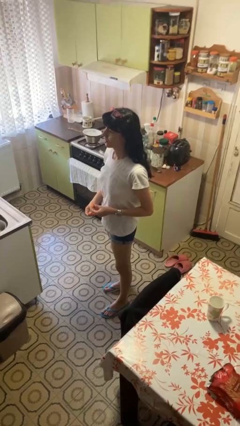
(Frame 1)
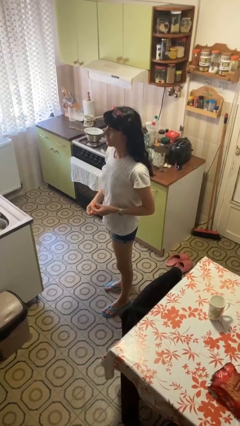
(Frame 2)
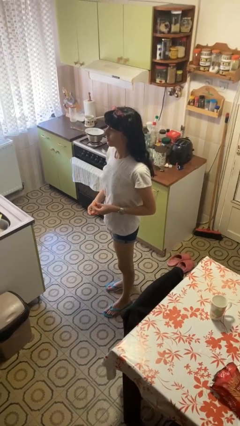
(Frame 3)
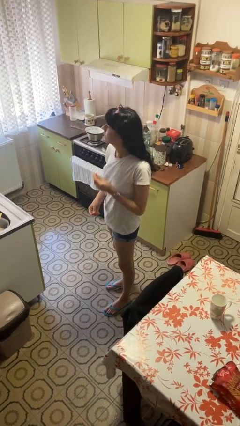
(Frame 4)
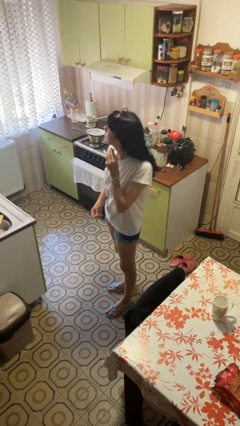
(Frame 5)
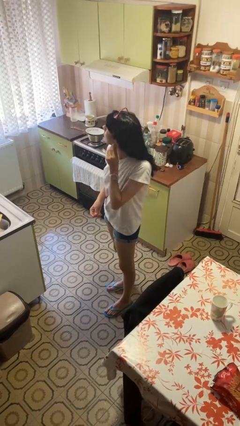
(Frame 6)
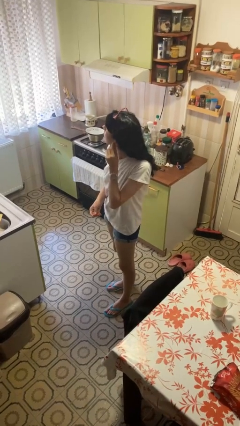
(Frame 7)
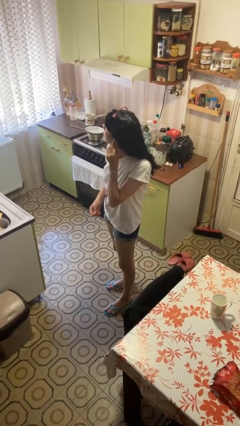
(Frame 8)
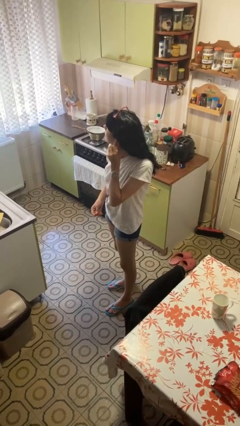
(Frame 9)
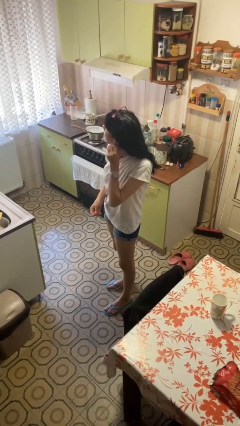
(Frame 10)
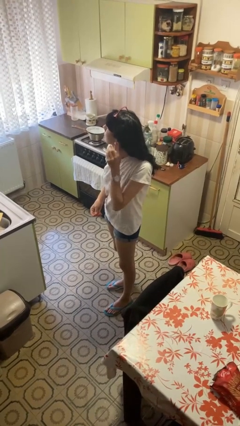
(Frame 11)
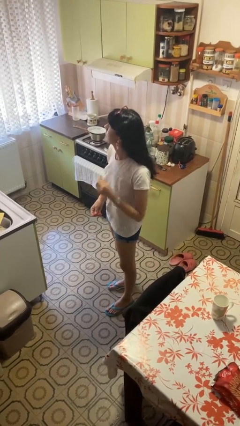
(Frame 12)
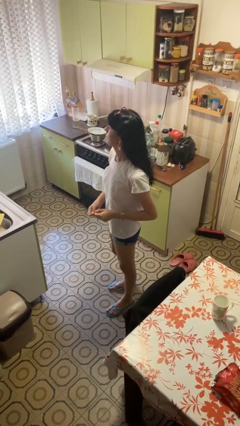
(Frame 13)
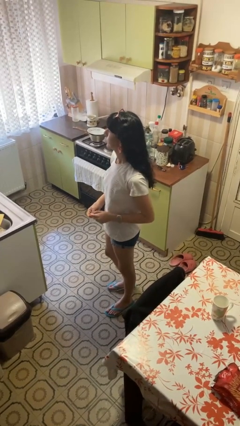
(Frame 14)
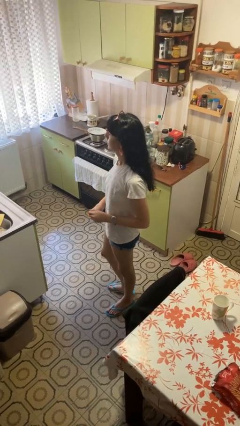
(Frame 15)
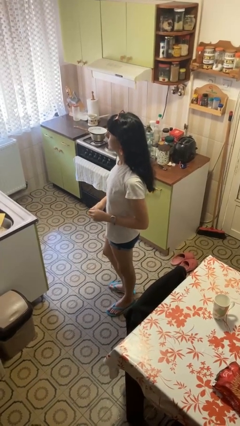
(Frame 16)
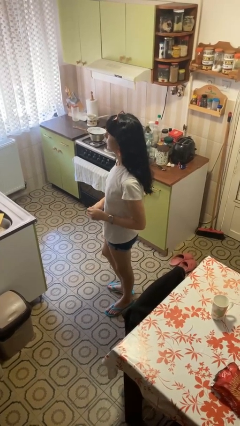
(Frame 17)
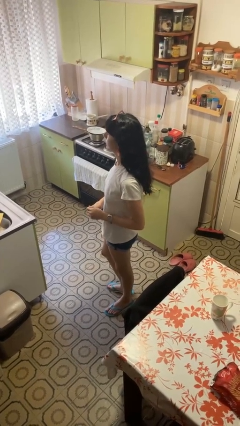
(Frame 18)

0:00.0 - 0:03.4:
person puts on earrings

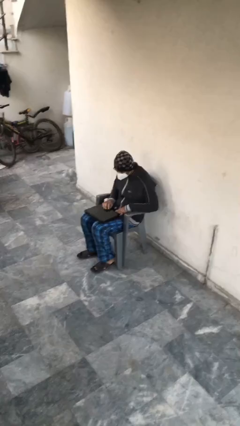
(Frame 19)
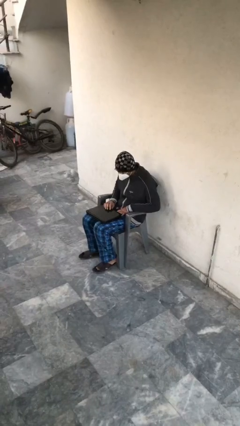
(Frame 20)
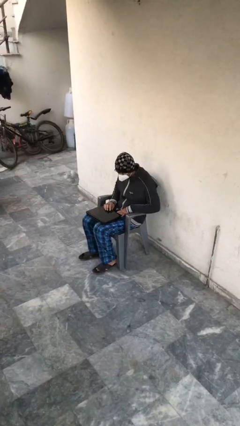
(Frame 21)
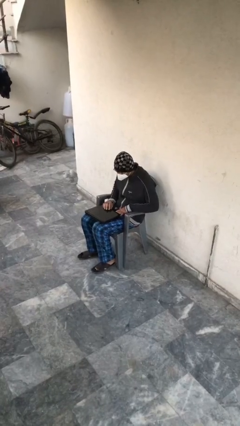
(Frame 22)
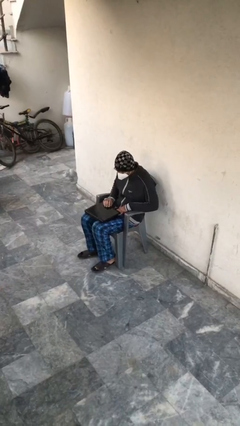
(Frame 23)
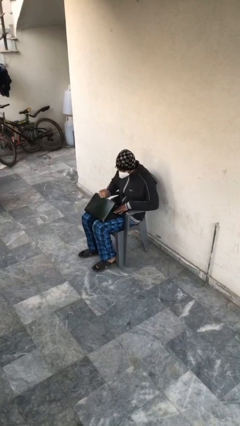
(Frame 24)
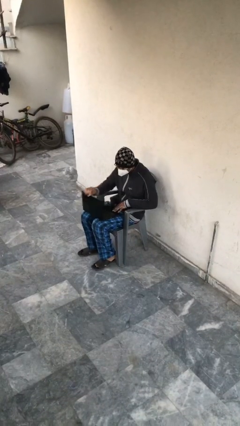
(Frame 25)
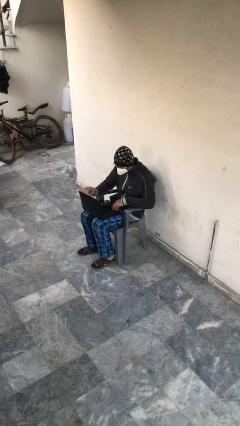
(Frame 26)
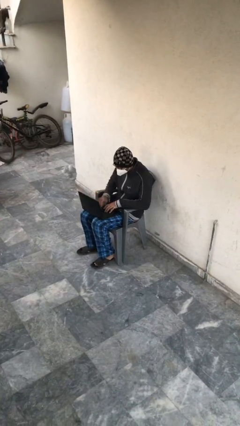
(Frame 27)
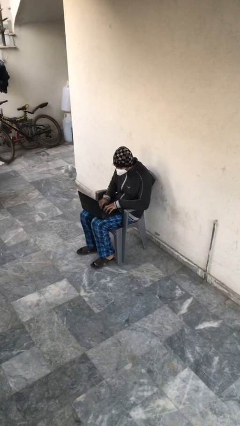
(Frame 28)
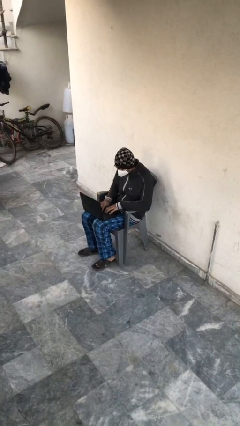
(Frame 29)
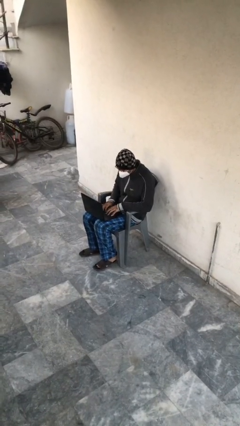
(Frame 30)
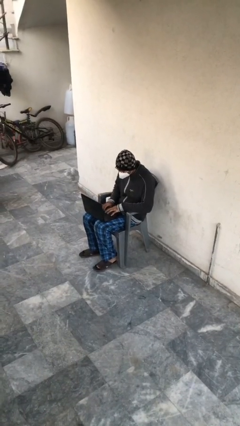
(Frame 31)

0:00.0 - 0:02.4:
person interacts with laptop

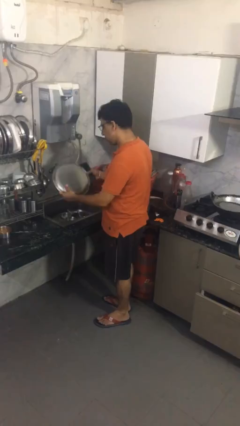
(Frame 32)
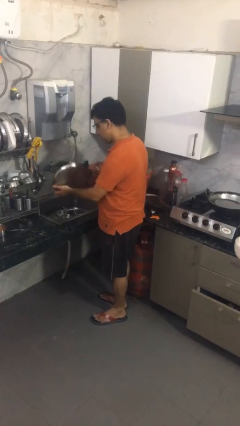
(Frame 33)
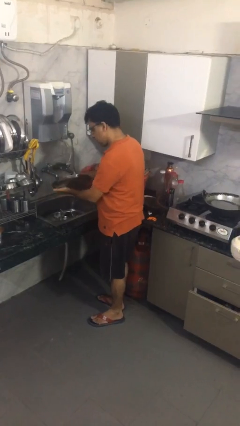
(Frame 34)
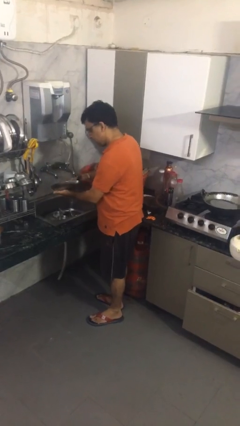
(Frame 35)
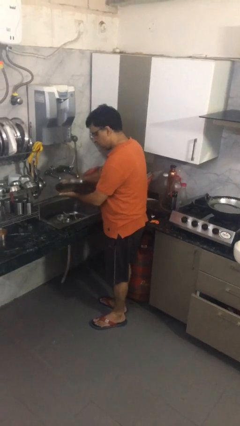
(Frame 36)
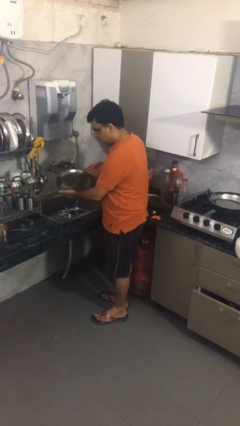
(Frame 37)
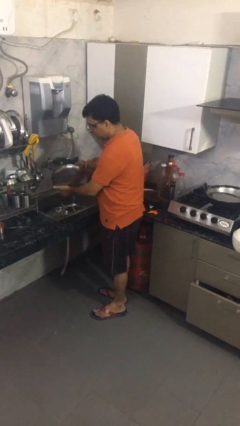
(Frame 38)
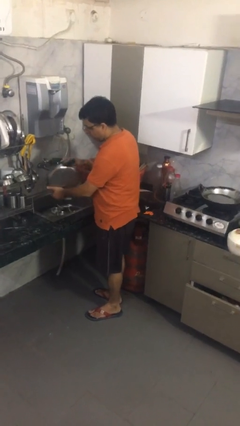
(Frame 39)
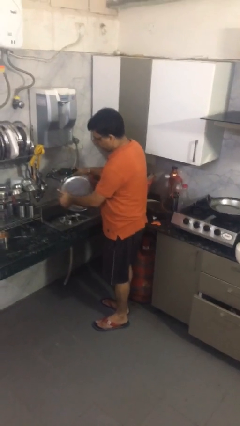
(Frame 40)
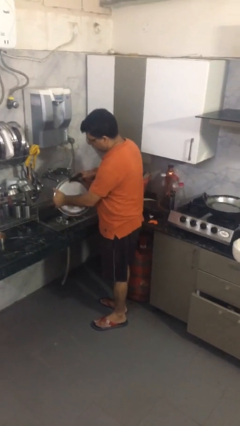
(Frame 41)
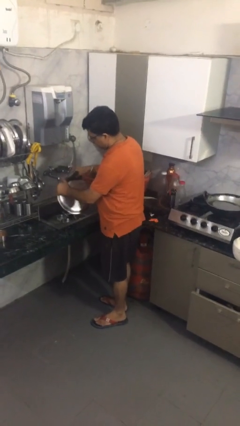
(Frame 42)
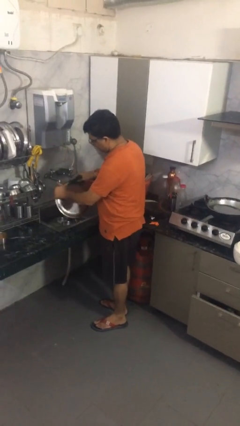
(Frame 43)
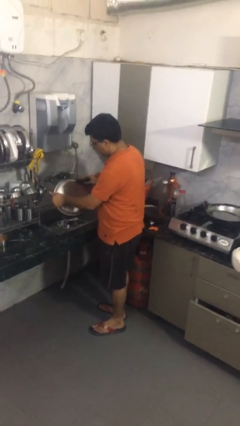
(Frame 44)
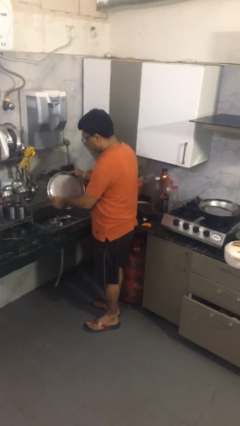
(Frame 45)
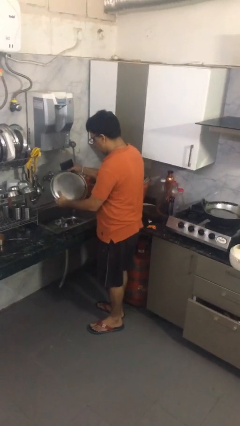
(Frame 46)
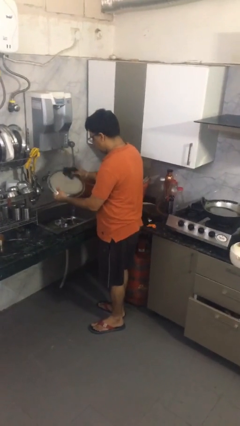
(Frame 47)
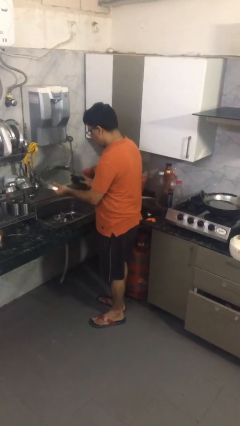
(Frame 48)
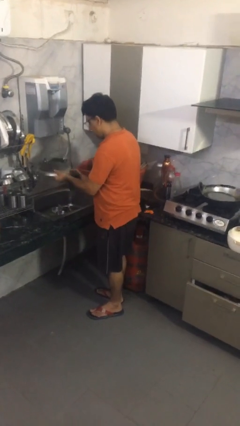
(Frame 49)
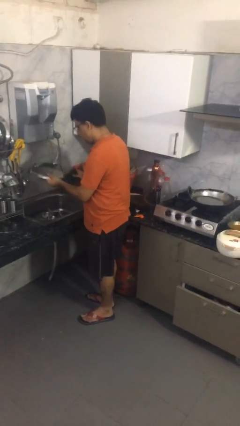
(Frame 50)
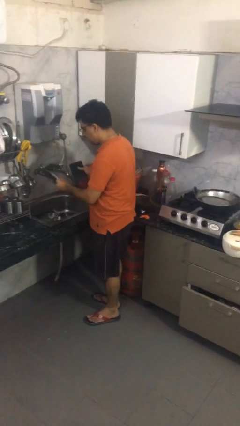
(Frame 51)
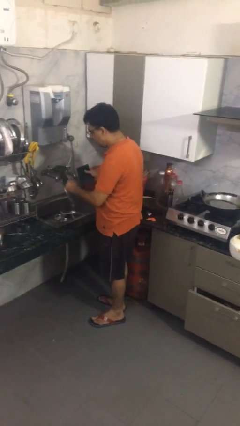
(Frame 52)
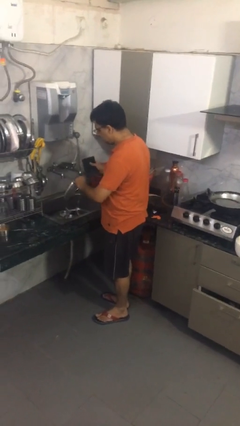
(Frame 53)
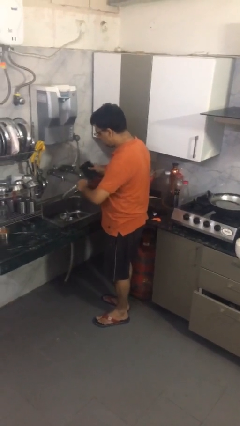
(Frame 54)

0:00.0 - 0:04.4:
person washes dish

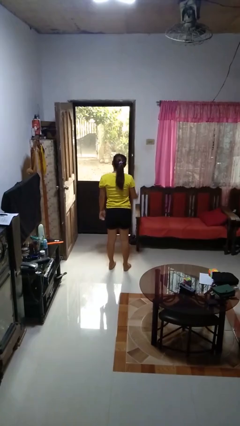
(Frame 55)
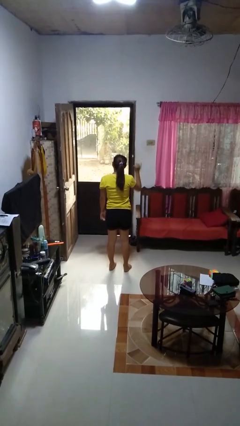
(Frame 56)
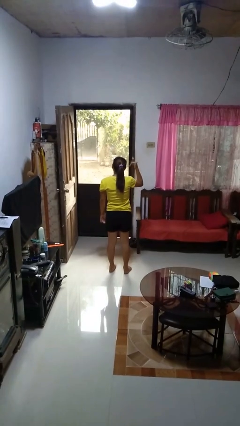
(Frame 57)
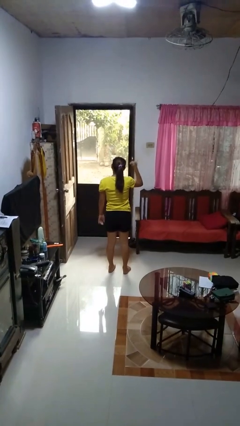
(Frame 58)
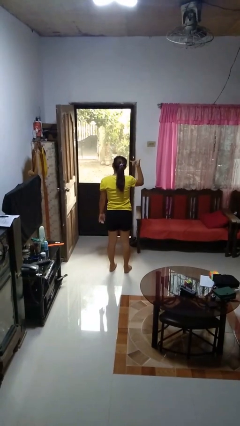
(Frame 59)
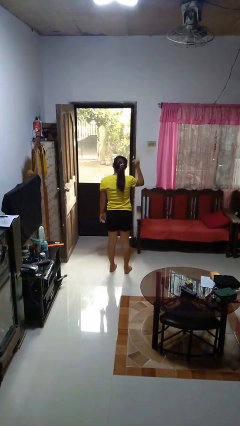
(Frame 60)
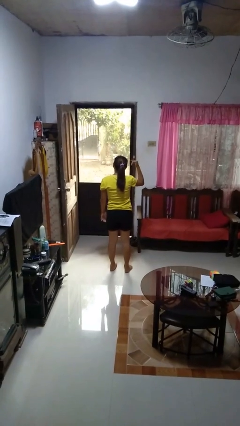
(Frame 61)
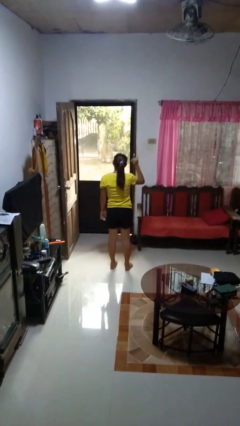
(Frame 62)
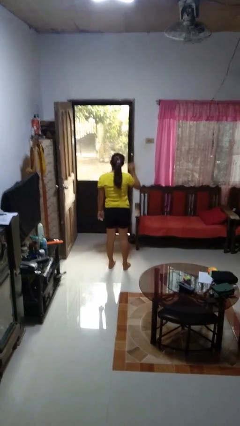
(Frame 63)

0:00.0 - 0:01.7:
person gestures hang loose

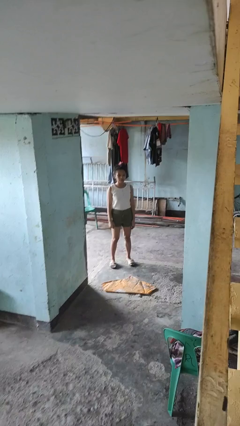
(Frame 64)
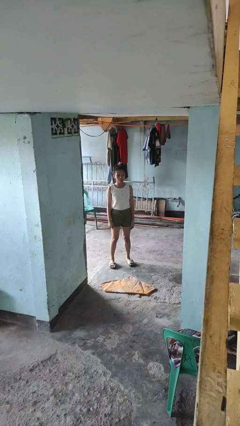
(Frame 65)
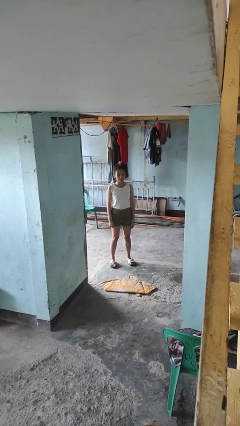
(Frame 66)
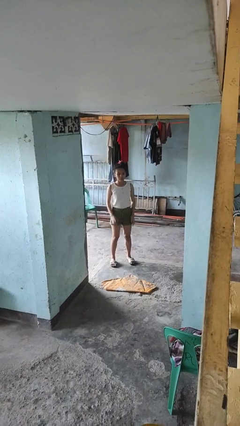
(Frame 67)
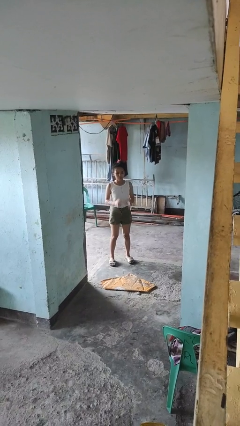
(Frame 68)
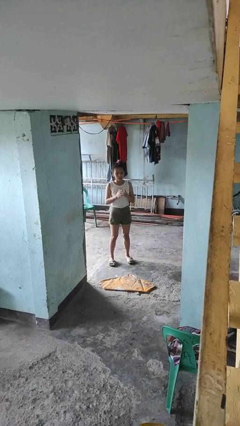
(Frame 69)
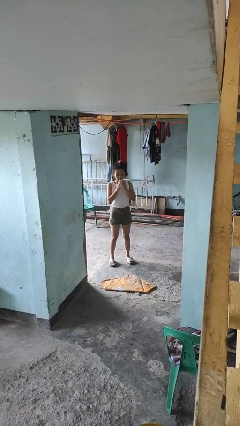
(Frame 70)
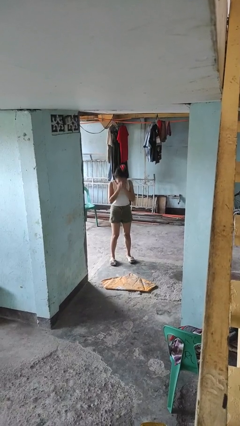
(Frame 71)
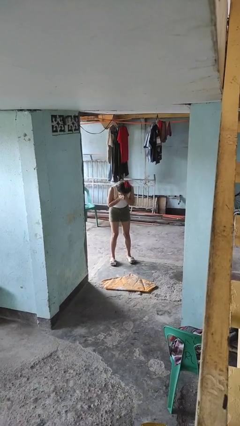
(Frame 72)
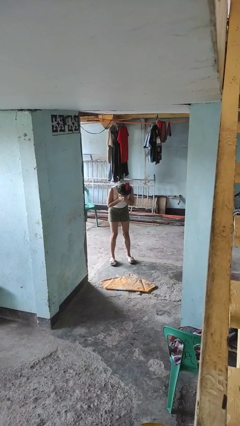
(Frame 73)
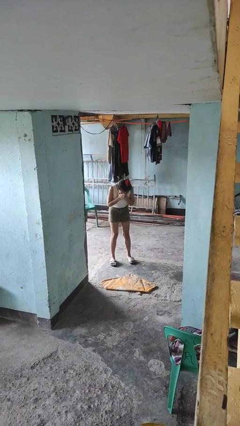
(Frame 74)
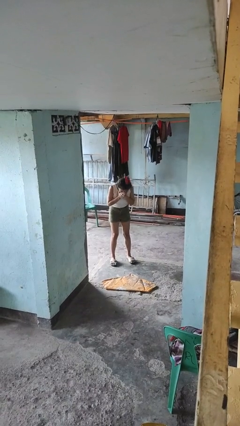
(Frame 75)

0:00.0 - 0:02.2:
person sneezes into hand

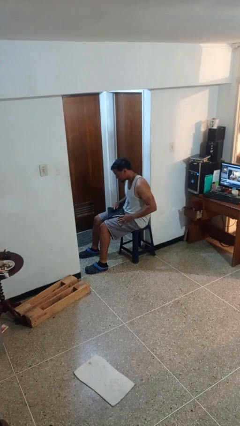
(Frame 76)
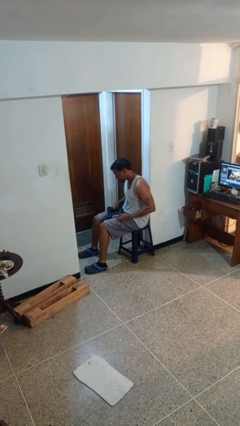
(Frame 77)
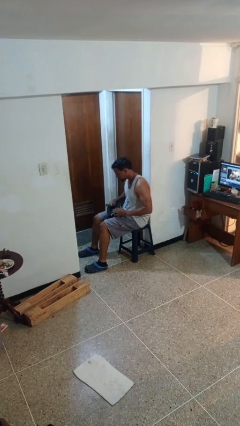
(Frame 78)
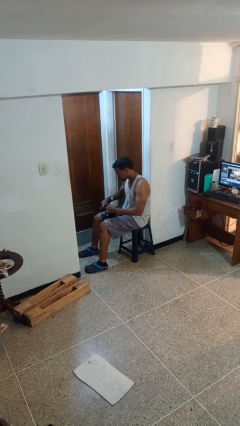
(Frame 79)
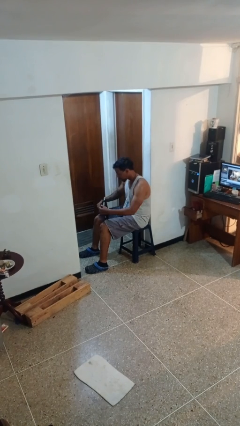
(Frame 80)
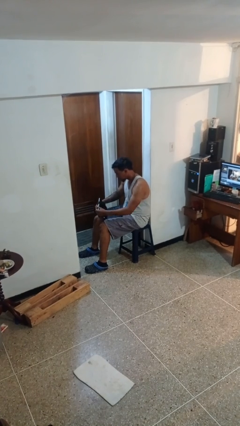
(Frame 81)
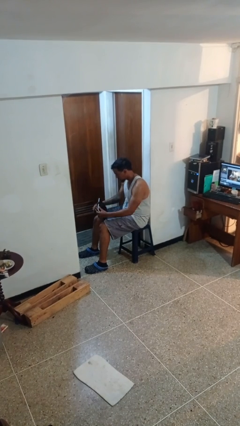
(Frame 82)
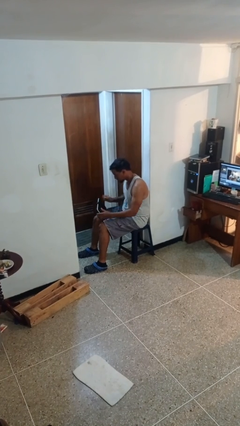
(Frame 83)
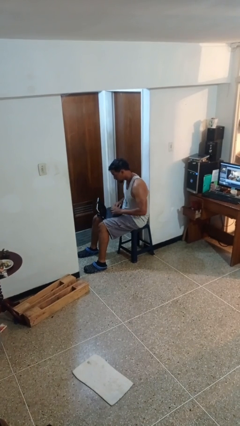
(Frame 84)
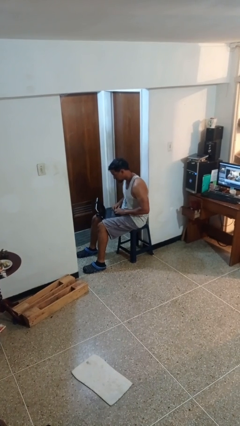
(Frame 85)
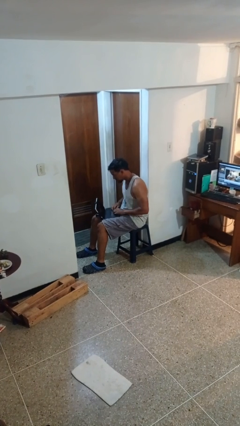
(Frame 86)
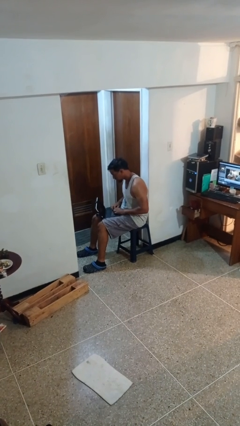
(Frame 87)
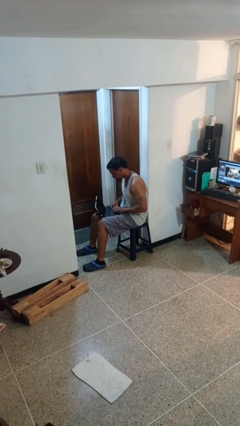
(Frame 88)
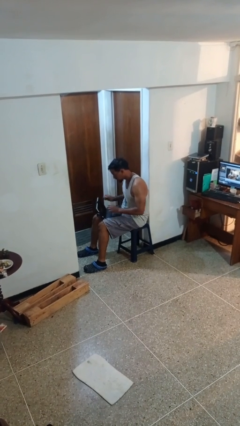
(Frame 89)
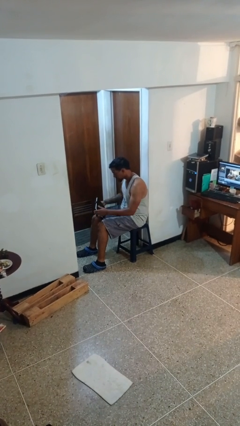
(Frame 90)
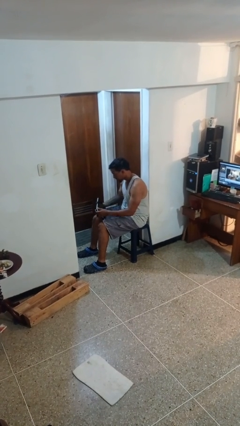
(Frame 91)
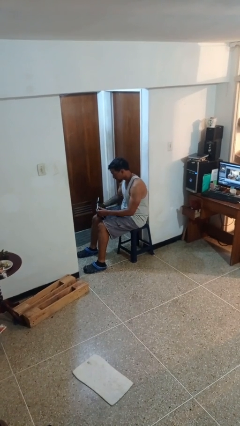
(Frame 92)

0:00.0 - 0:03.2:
person opens laptop

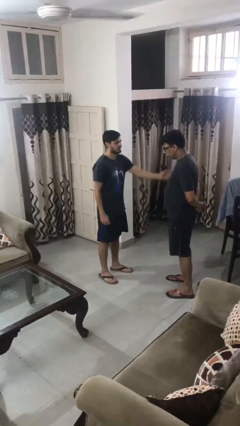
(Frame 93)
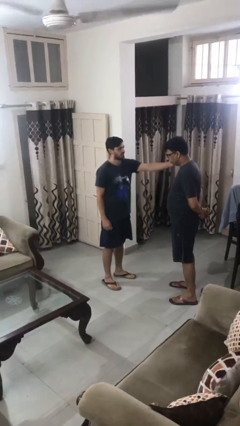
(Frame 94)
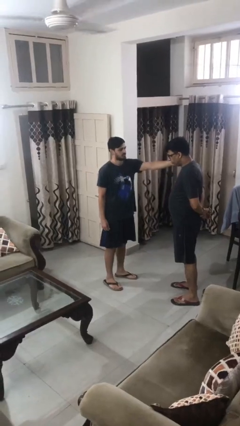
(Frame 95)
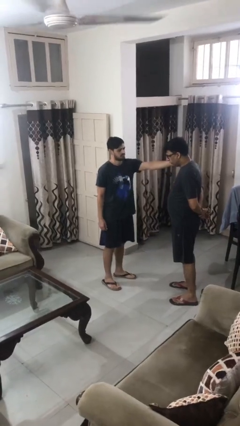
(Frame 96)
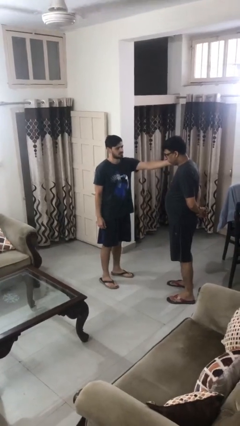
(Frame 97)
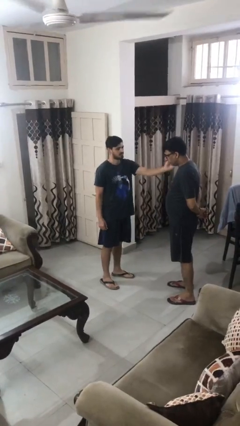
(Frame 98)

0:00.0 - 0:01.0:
person touches face of person
